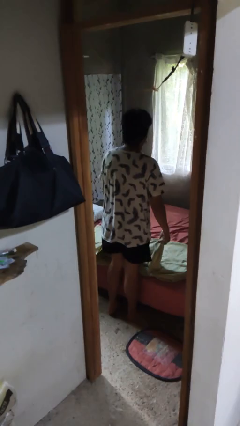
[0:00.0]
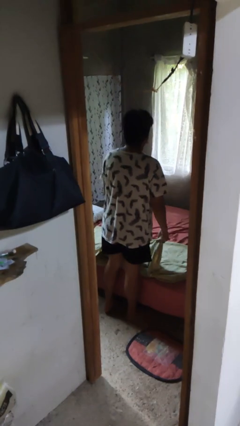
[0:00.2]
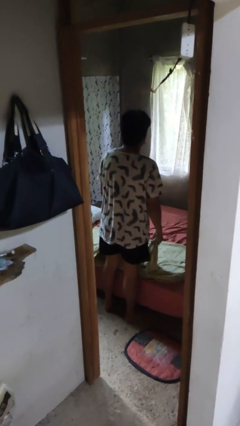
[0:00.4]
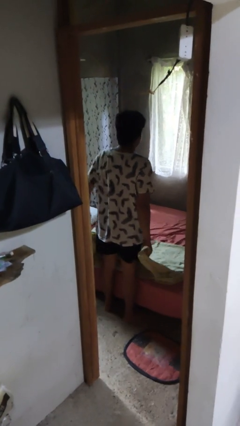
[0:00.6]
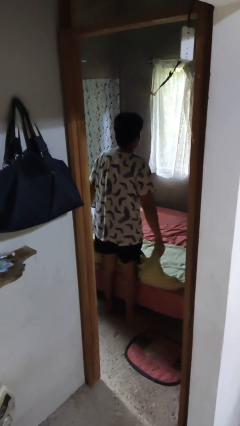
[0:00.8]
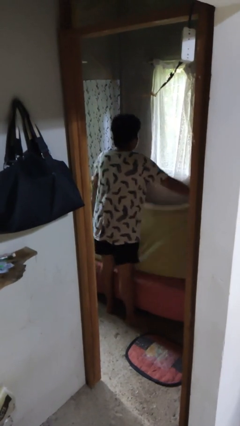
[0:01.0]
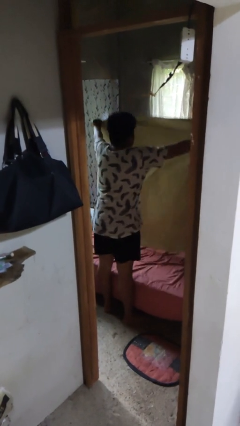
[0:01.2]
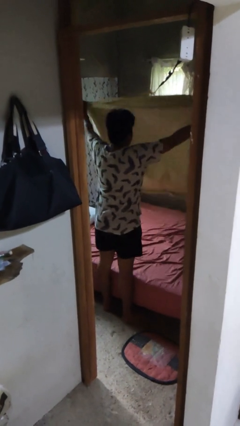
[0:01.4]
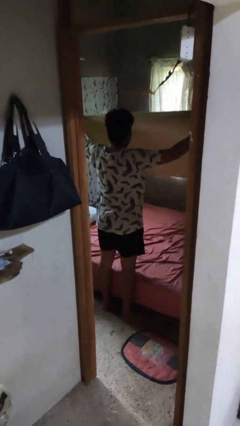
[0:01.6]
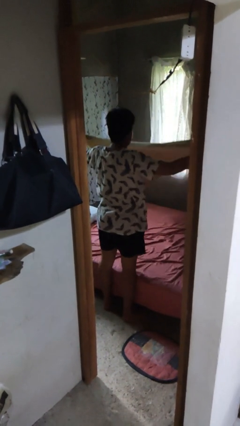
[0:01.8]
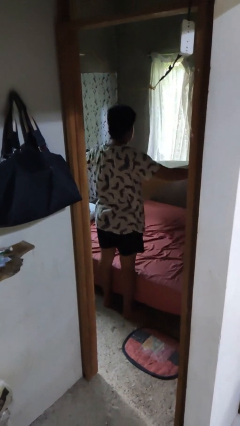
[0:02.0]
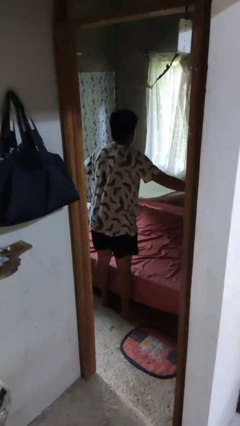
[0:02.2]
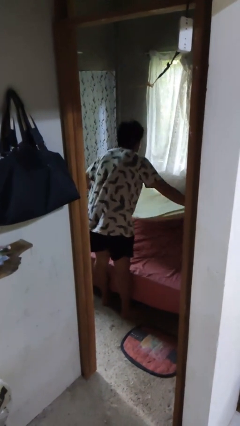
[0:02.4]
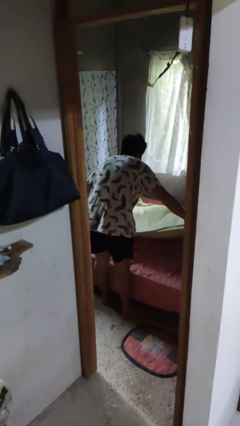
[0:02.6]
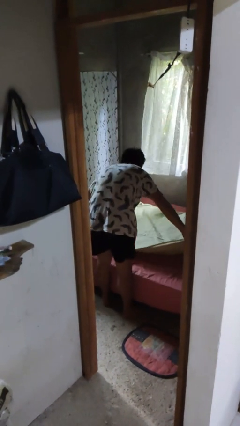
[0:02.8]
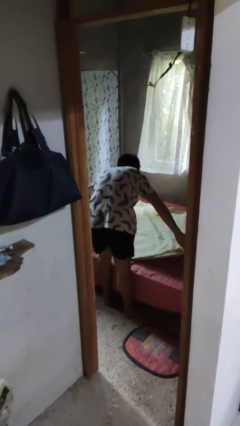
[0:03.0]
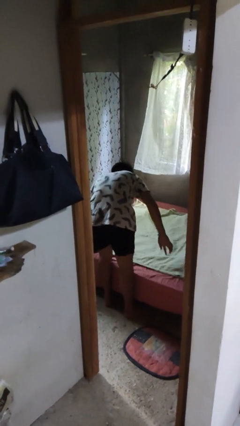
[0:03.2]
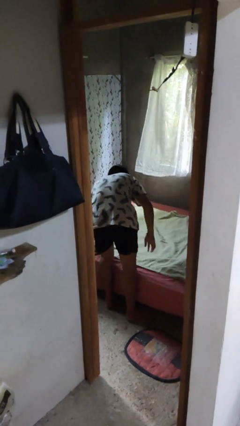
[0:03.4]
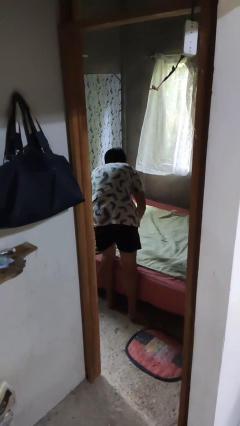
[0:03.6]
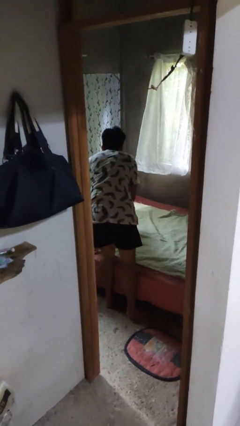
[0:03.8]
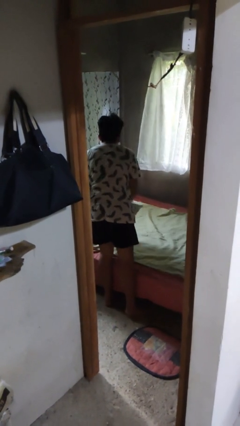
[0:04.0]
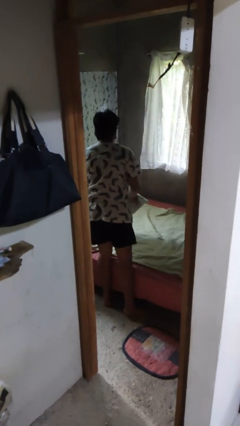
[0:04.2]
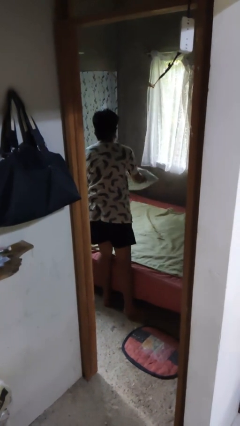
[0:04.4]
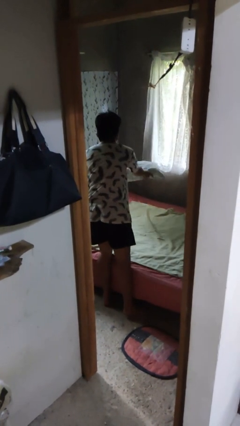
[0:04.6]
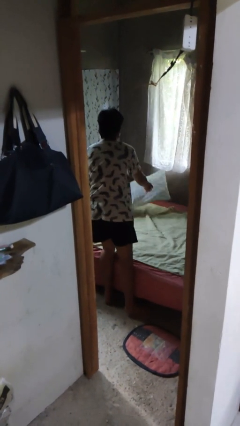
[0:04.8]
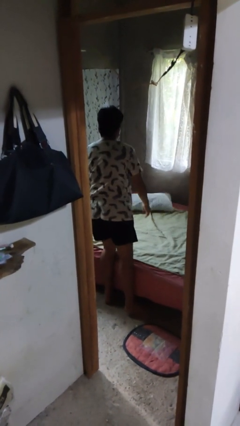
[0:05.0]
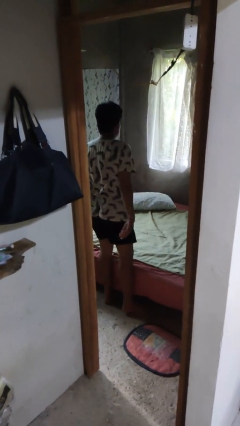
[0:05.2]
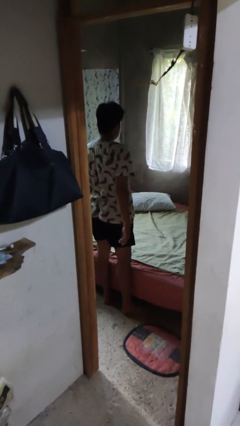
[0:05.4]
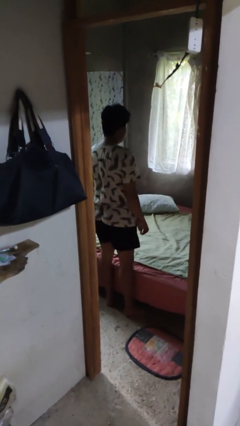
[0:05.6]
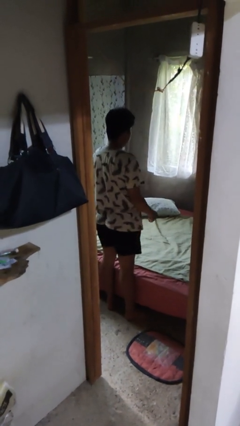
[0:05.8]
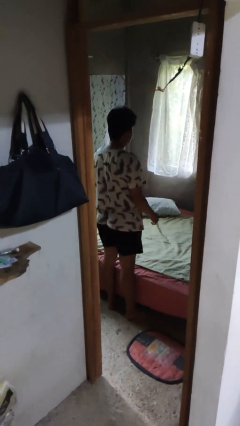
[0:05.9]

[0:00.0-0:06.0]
person makes bed

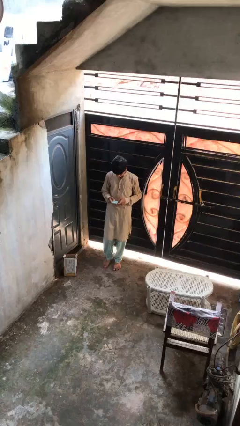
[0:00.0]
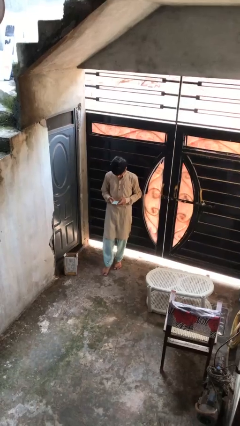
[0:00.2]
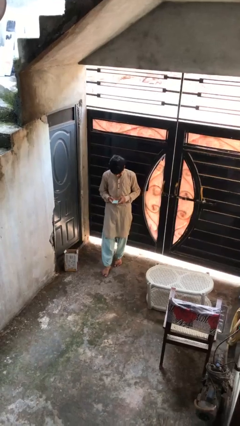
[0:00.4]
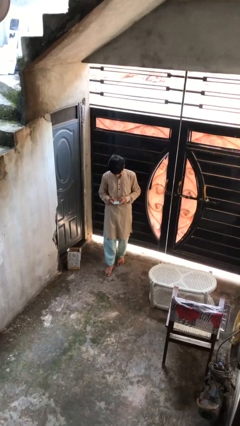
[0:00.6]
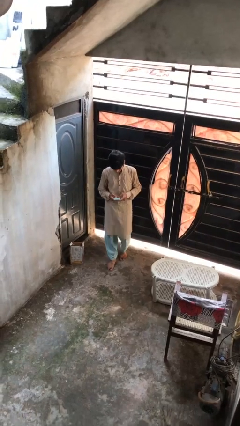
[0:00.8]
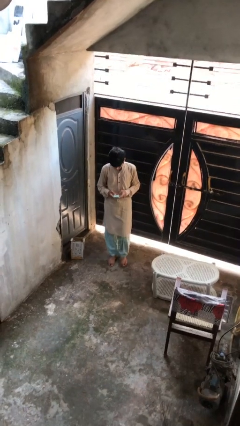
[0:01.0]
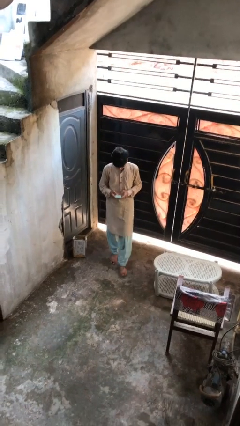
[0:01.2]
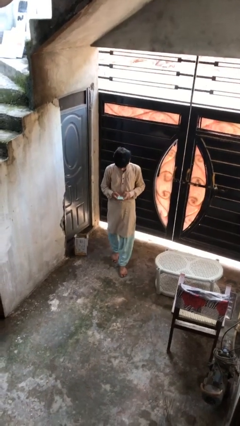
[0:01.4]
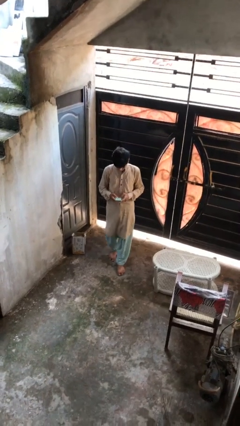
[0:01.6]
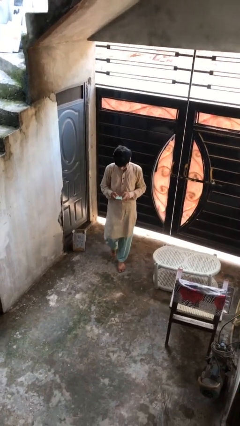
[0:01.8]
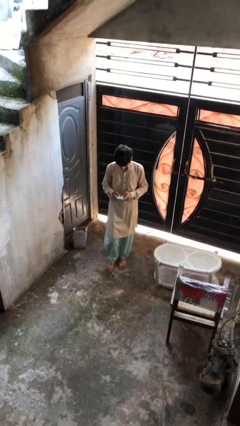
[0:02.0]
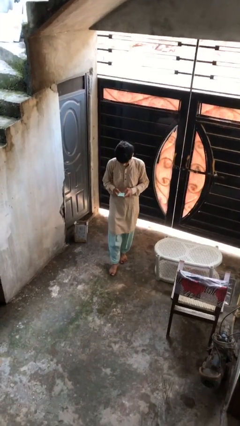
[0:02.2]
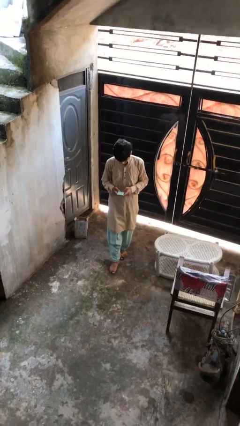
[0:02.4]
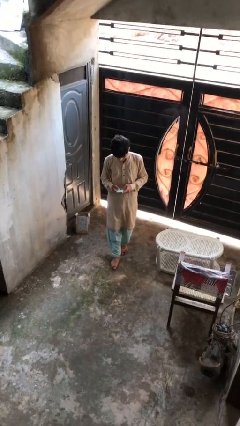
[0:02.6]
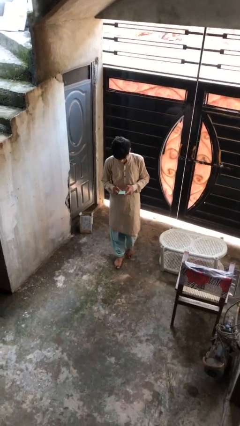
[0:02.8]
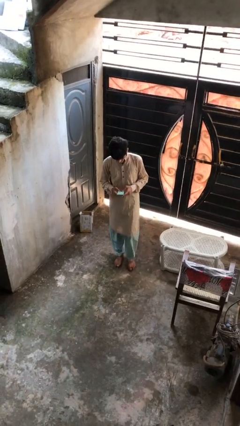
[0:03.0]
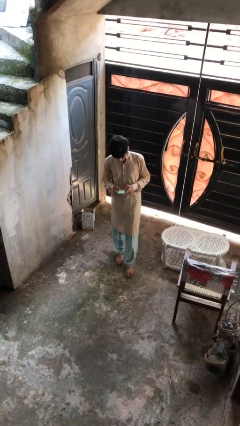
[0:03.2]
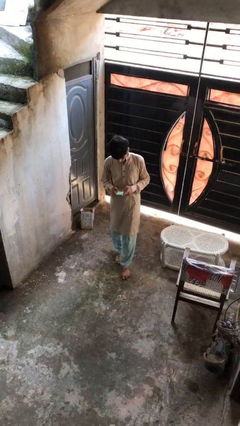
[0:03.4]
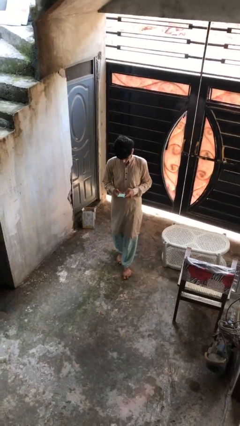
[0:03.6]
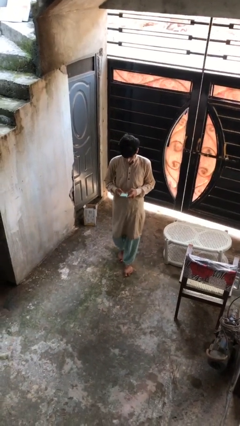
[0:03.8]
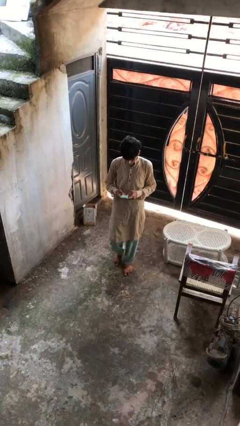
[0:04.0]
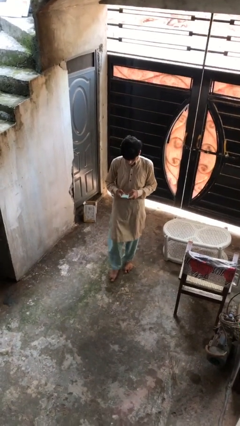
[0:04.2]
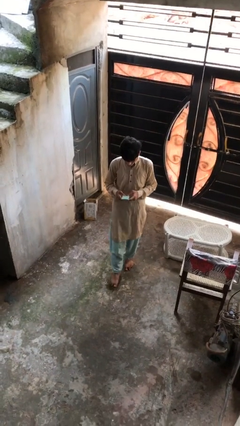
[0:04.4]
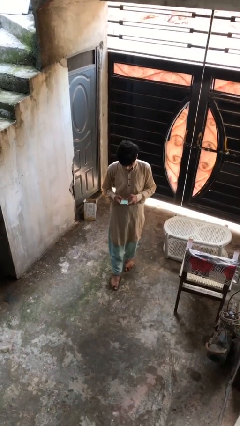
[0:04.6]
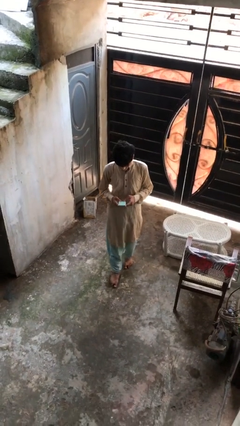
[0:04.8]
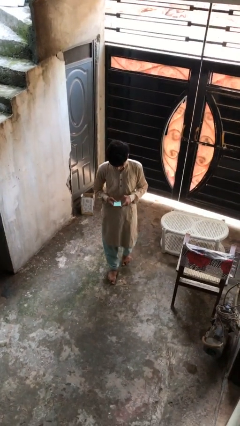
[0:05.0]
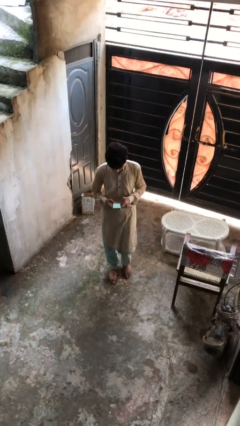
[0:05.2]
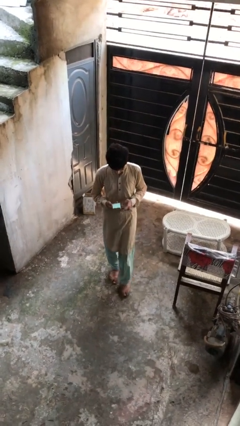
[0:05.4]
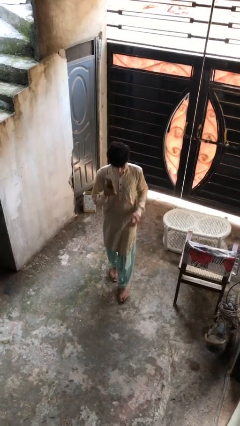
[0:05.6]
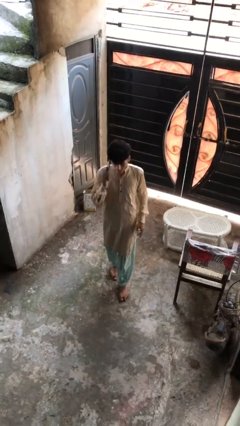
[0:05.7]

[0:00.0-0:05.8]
person texts on phone

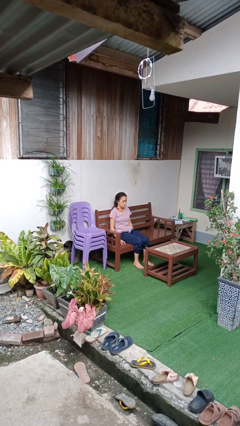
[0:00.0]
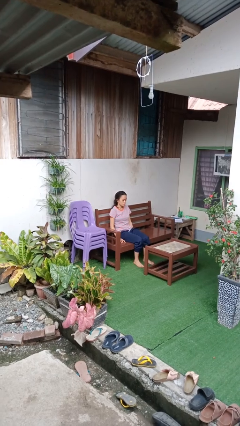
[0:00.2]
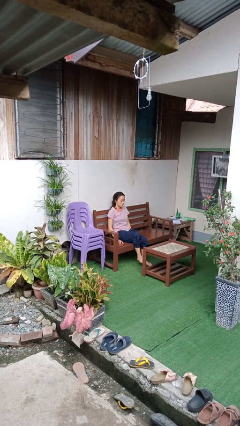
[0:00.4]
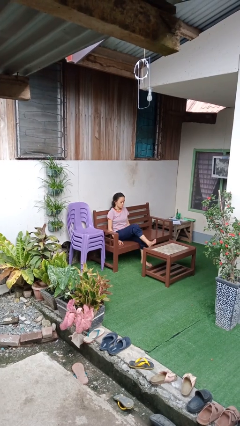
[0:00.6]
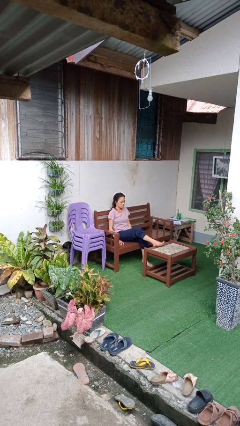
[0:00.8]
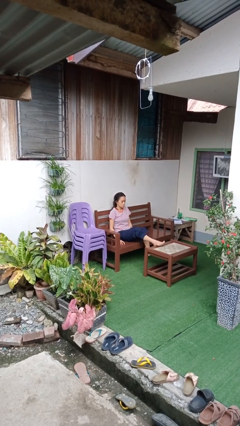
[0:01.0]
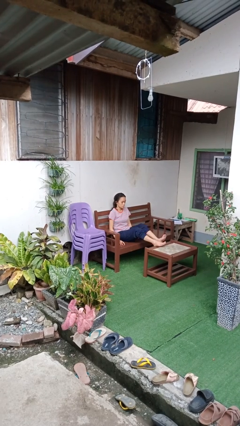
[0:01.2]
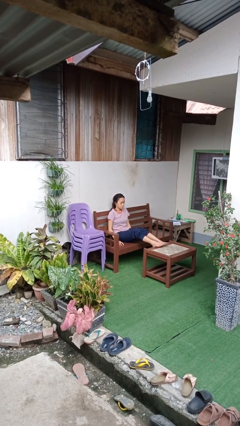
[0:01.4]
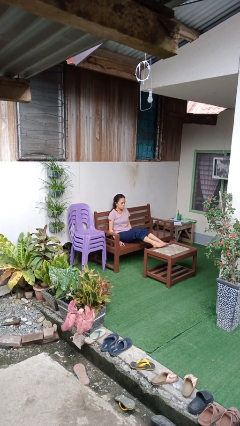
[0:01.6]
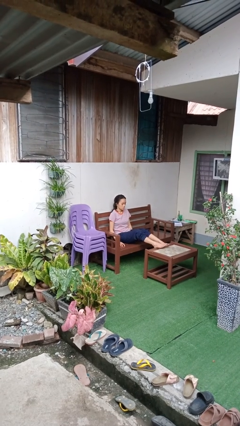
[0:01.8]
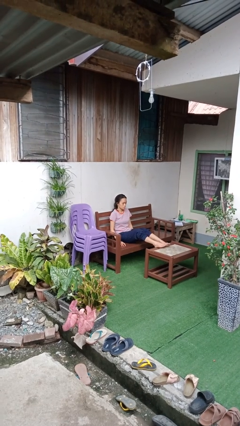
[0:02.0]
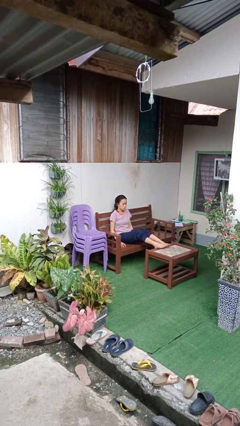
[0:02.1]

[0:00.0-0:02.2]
person puts feet up

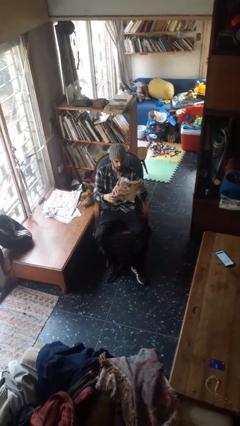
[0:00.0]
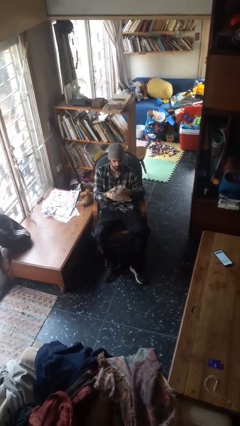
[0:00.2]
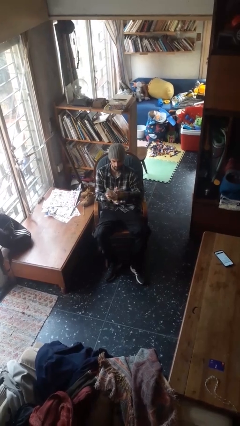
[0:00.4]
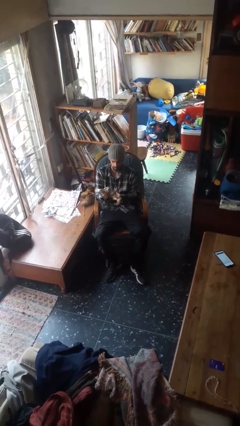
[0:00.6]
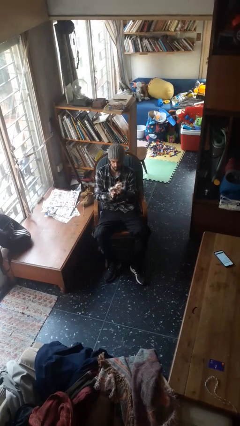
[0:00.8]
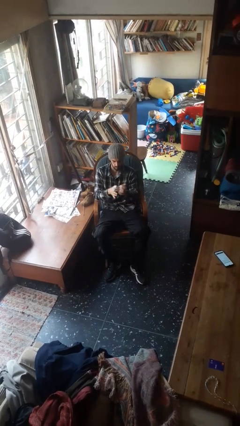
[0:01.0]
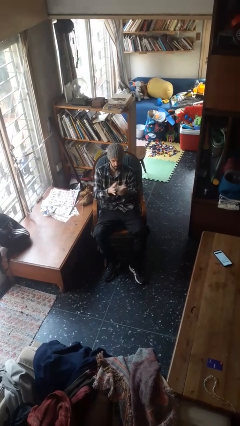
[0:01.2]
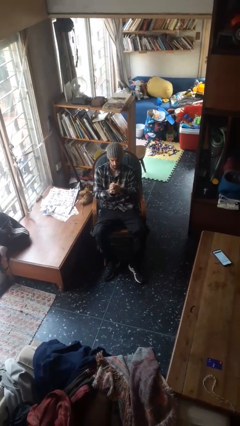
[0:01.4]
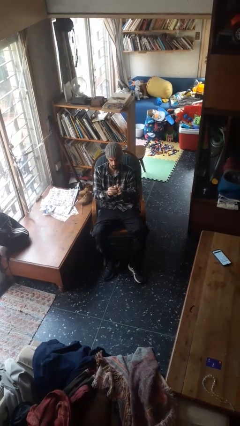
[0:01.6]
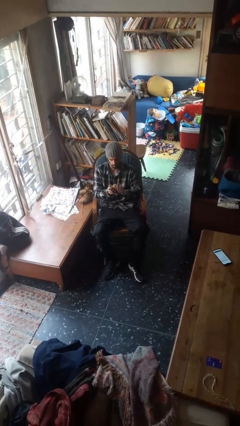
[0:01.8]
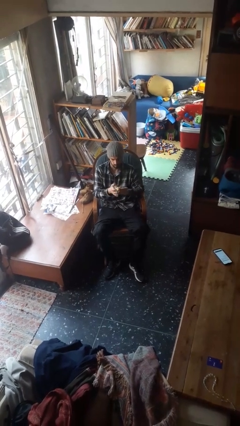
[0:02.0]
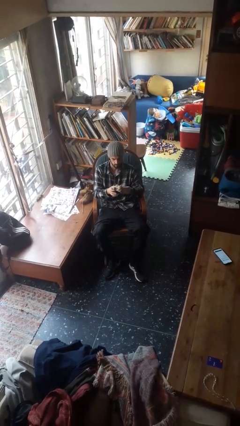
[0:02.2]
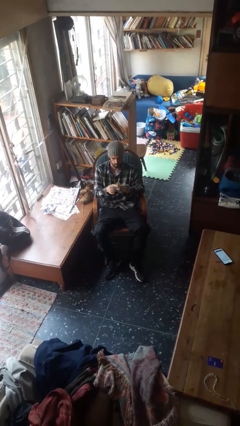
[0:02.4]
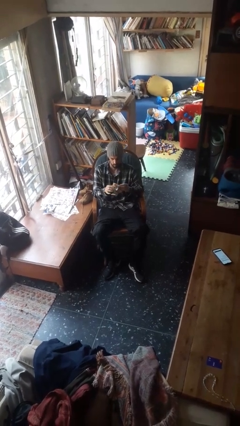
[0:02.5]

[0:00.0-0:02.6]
person crumples paper

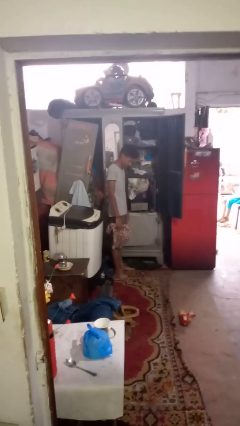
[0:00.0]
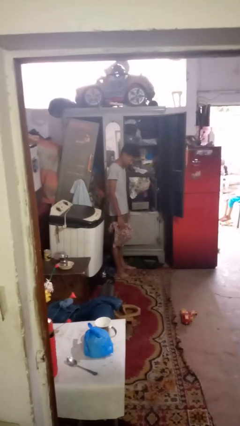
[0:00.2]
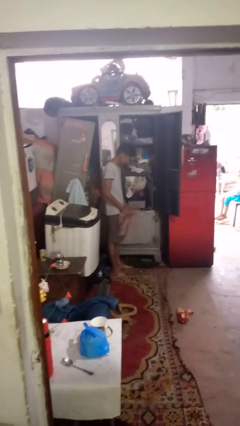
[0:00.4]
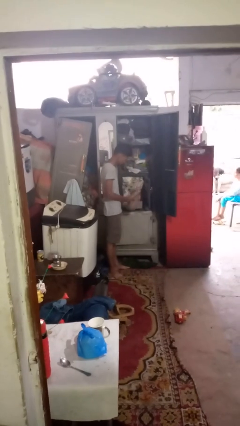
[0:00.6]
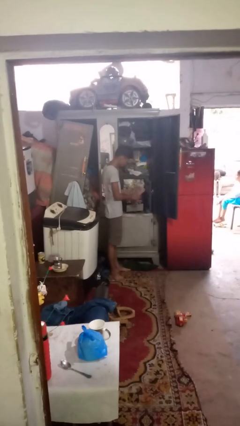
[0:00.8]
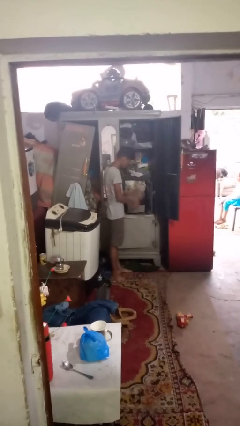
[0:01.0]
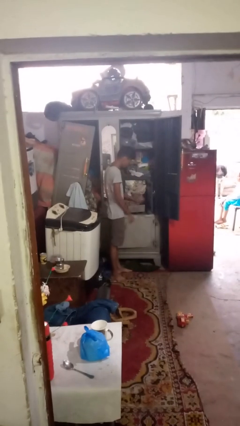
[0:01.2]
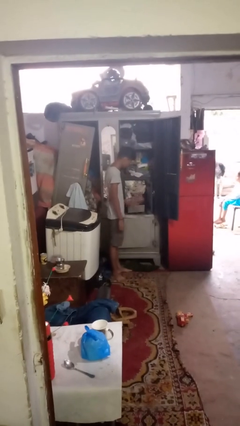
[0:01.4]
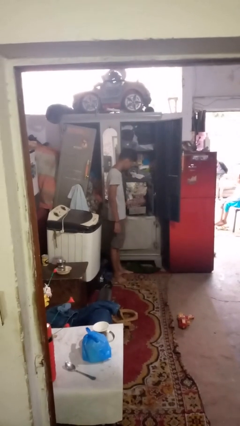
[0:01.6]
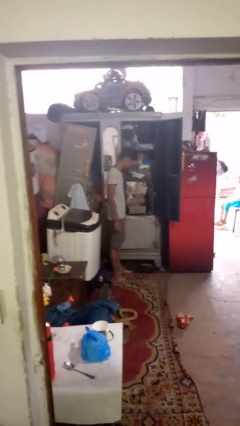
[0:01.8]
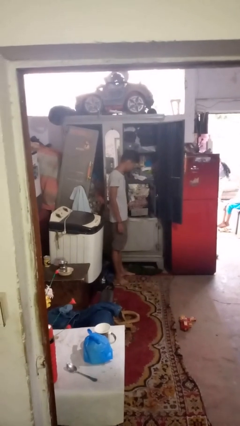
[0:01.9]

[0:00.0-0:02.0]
person puts clothes into dresser
